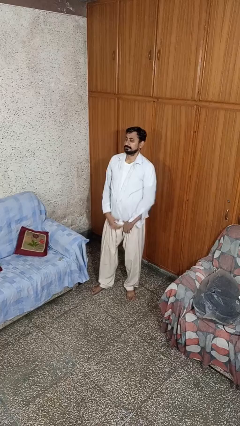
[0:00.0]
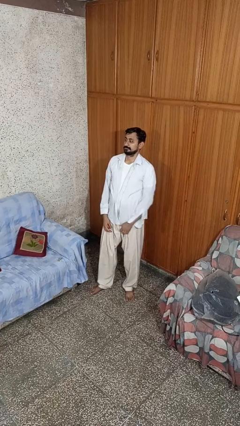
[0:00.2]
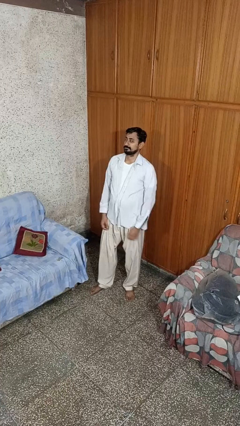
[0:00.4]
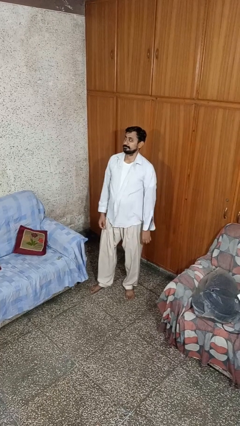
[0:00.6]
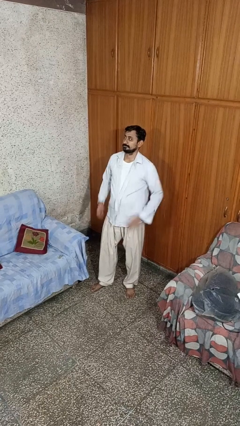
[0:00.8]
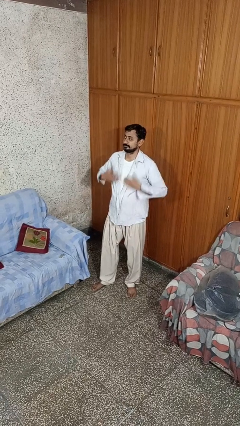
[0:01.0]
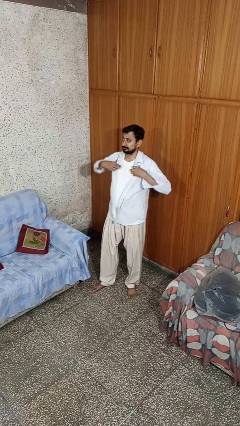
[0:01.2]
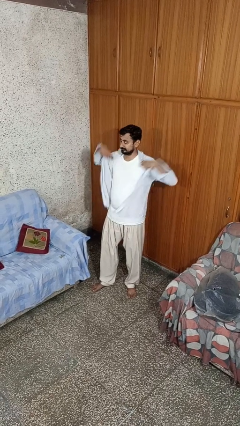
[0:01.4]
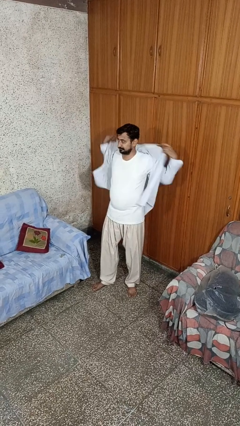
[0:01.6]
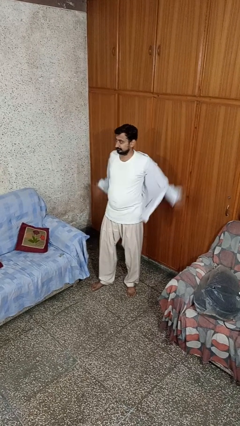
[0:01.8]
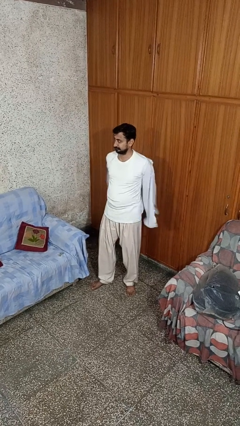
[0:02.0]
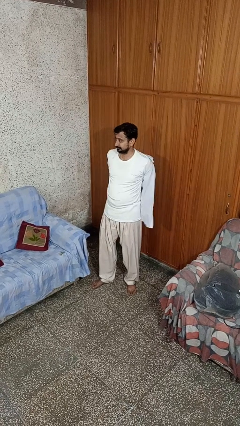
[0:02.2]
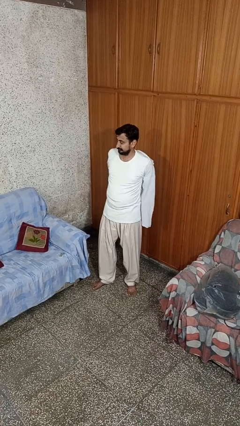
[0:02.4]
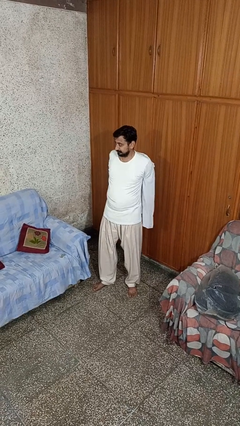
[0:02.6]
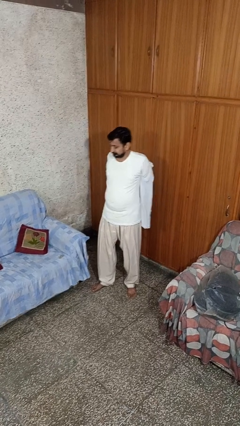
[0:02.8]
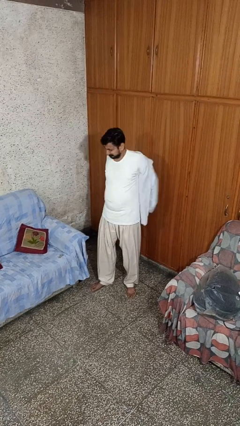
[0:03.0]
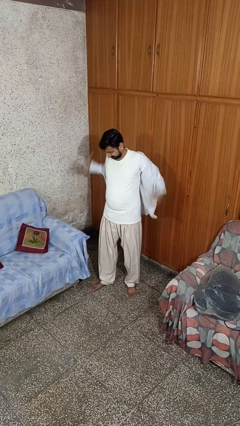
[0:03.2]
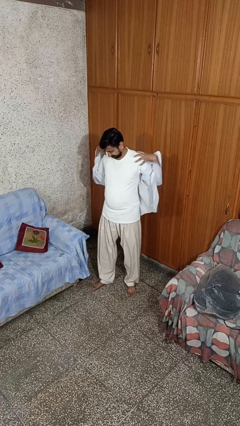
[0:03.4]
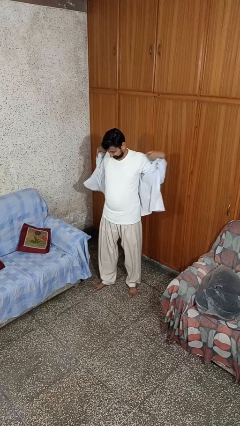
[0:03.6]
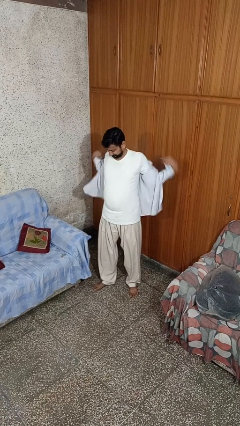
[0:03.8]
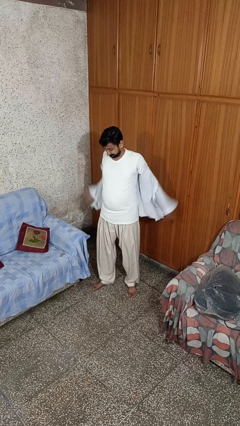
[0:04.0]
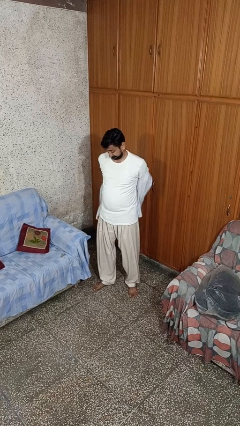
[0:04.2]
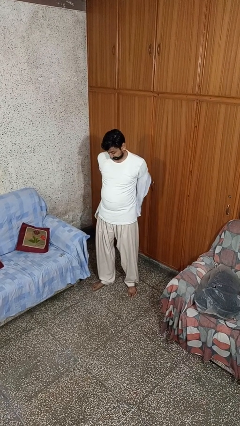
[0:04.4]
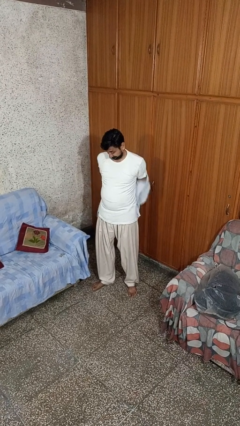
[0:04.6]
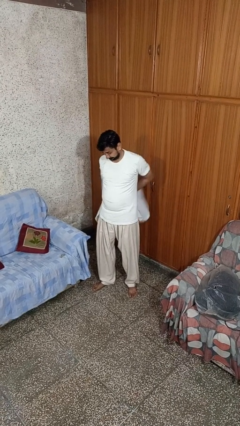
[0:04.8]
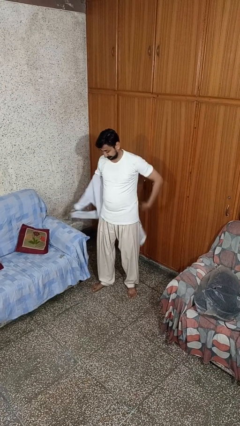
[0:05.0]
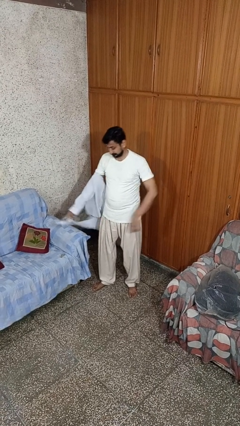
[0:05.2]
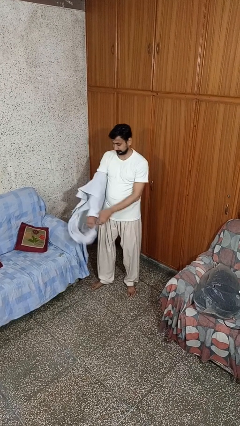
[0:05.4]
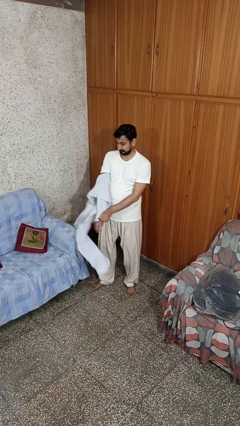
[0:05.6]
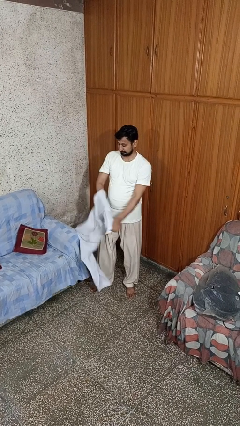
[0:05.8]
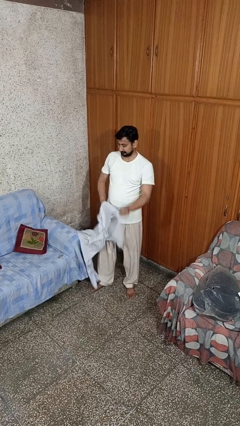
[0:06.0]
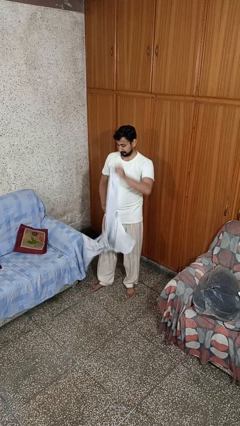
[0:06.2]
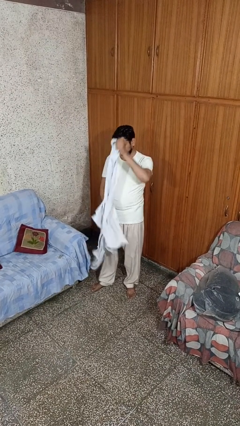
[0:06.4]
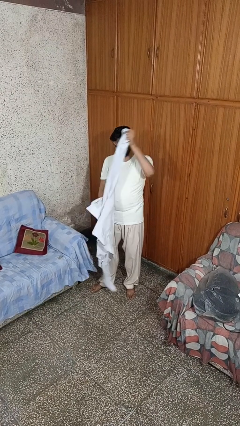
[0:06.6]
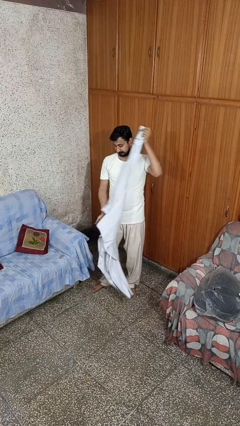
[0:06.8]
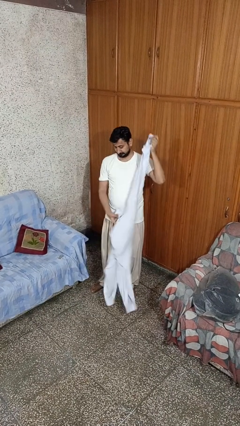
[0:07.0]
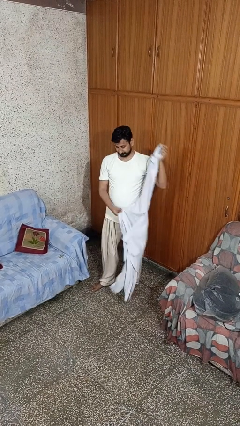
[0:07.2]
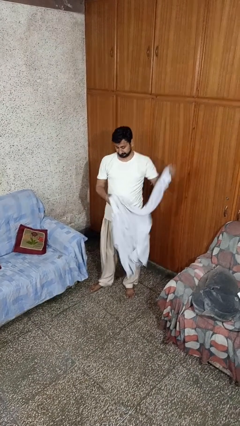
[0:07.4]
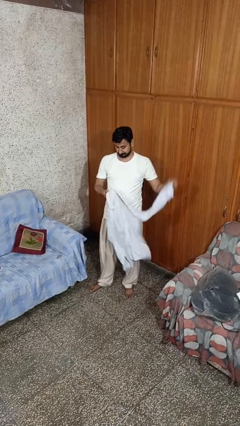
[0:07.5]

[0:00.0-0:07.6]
person takes off shirt

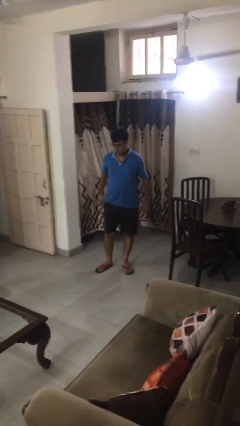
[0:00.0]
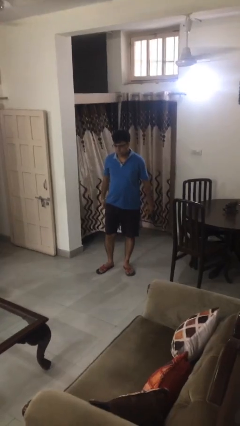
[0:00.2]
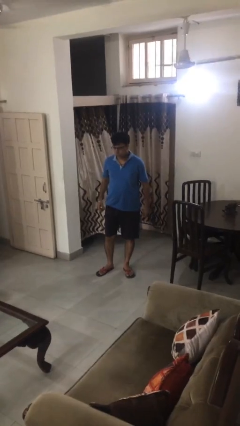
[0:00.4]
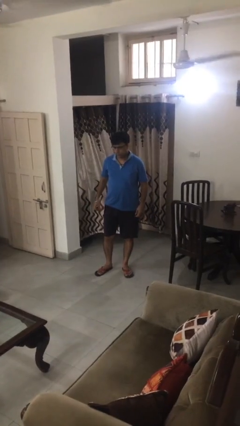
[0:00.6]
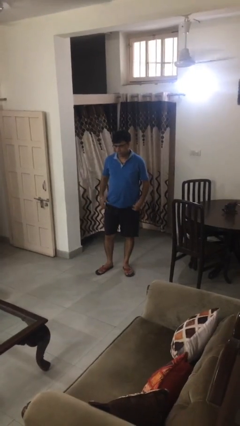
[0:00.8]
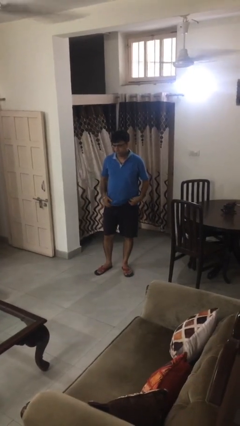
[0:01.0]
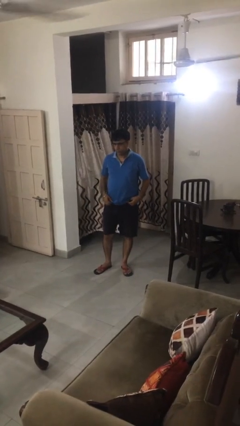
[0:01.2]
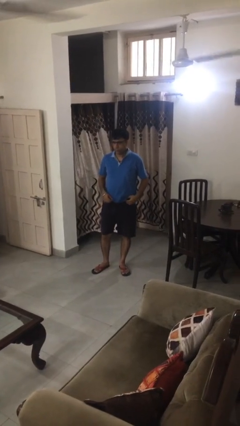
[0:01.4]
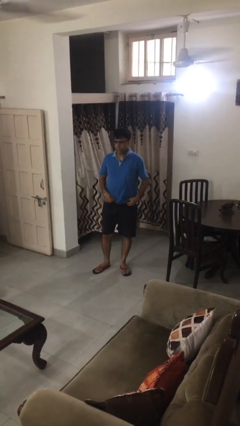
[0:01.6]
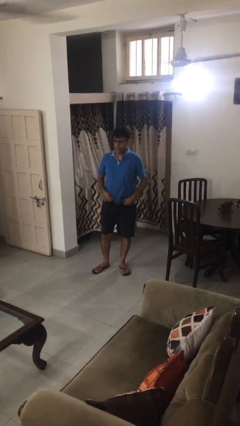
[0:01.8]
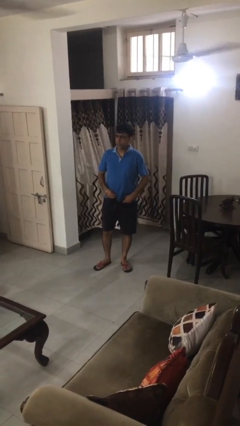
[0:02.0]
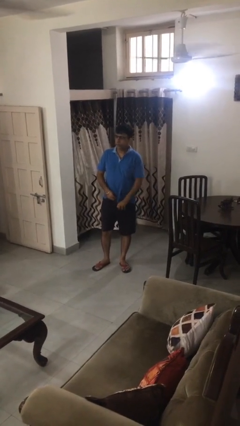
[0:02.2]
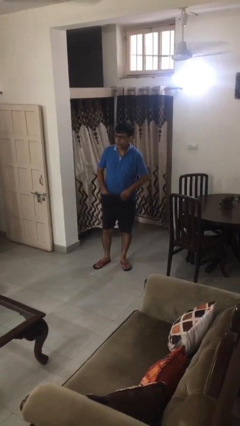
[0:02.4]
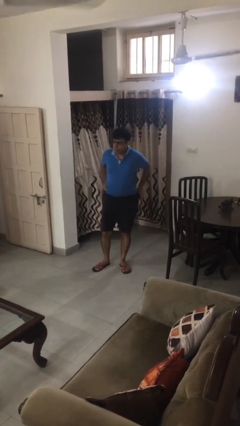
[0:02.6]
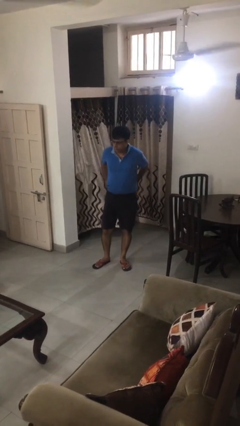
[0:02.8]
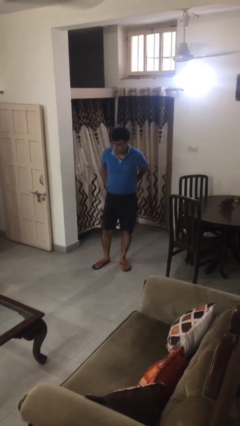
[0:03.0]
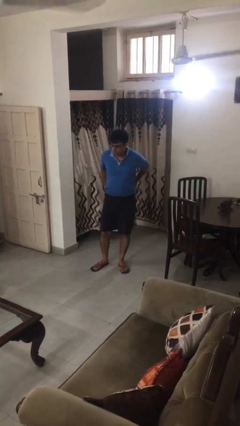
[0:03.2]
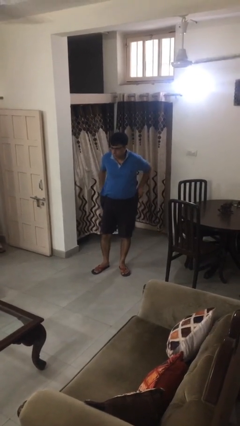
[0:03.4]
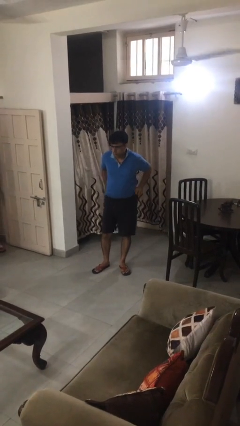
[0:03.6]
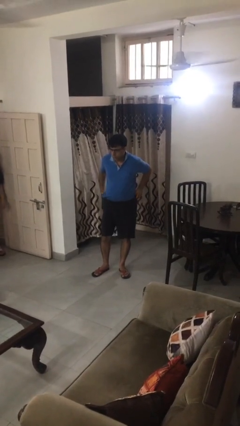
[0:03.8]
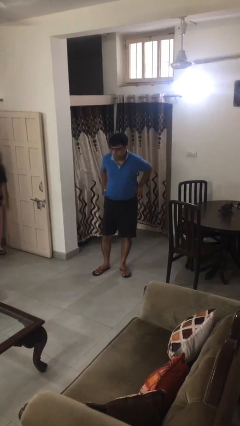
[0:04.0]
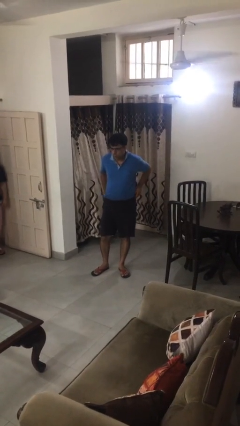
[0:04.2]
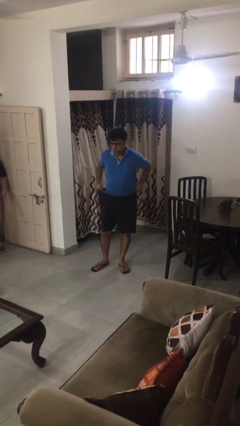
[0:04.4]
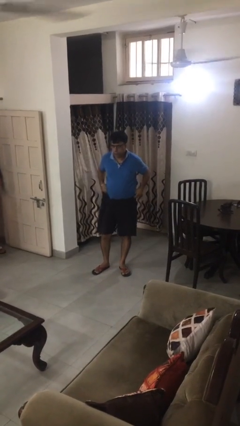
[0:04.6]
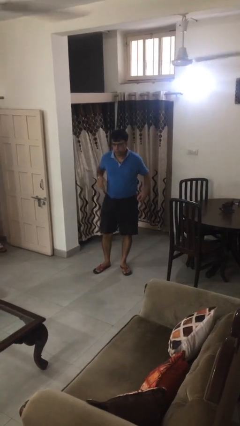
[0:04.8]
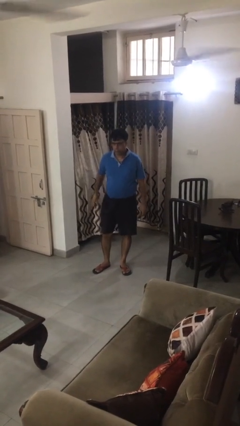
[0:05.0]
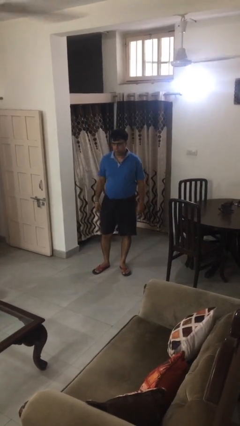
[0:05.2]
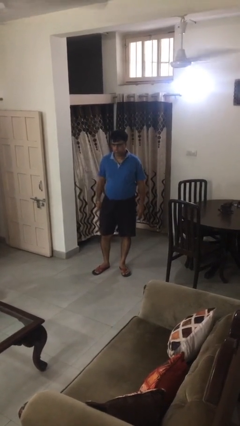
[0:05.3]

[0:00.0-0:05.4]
person tucks in shirt

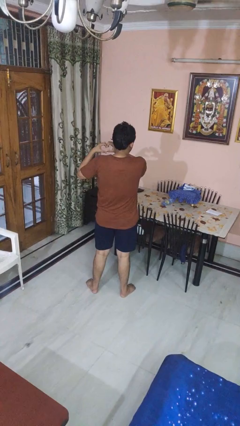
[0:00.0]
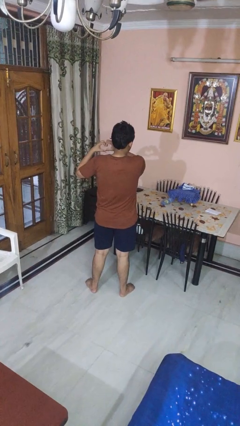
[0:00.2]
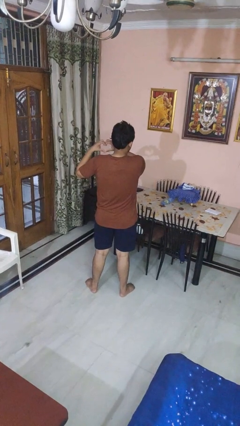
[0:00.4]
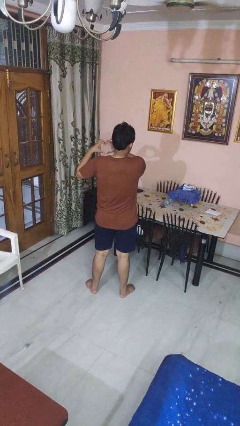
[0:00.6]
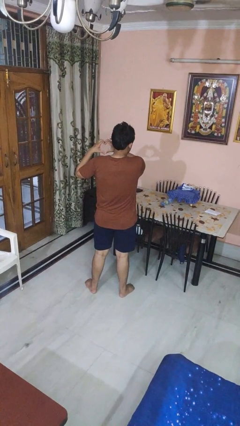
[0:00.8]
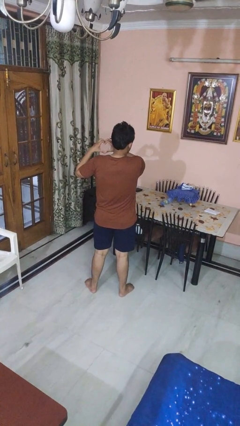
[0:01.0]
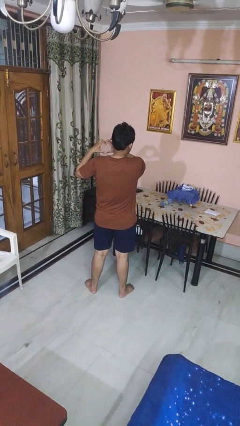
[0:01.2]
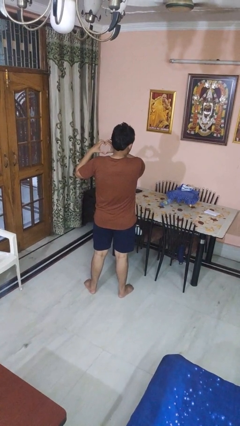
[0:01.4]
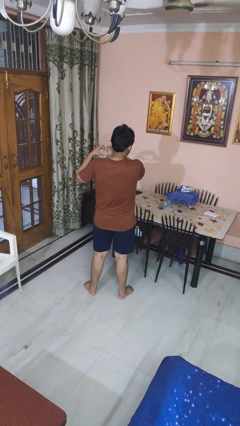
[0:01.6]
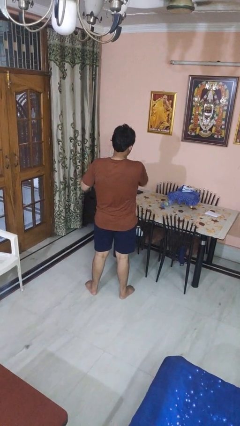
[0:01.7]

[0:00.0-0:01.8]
person gestures heart

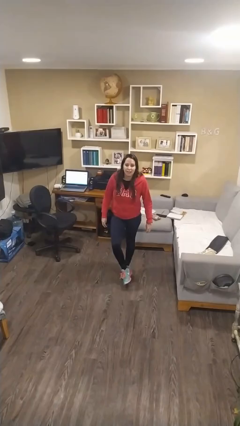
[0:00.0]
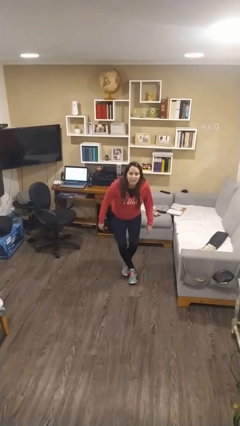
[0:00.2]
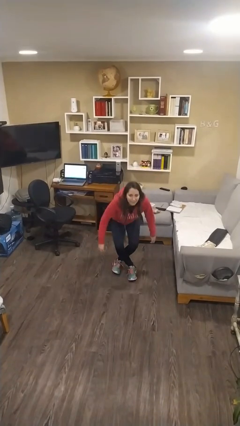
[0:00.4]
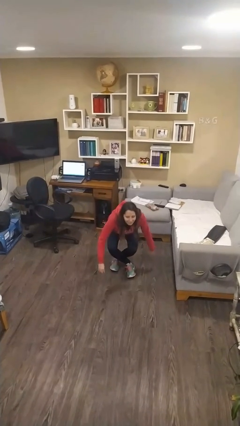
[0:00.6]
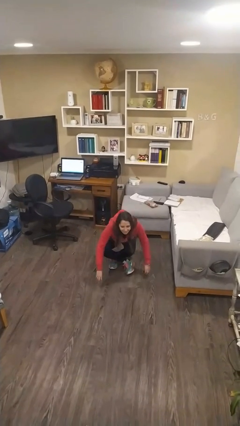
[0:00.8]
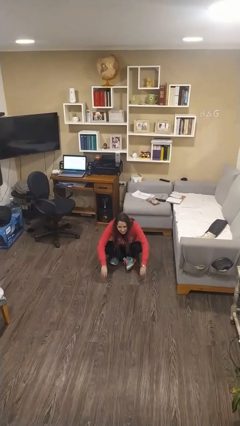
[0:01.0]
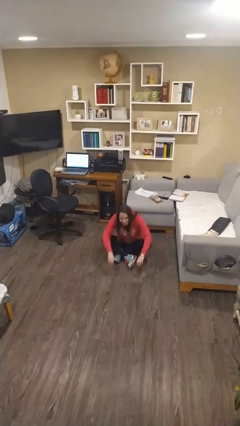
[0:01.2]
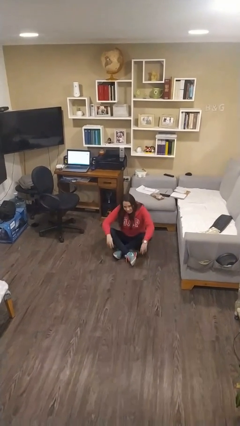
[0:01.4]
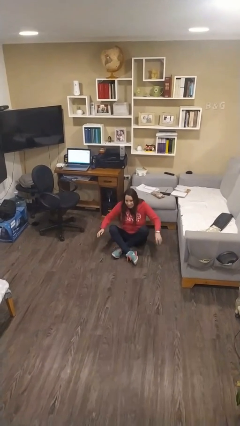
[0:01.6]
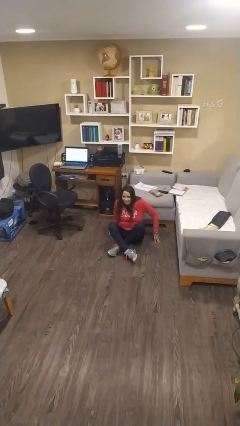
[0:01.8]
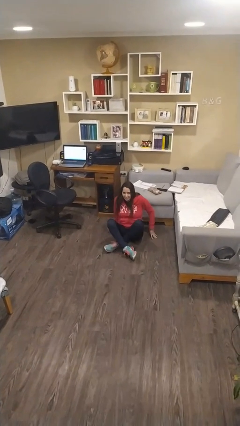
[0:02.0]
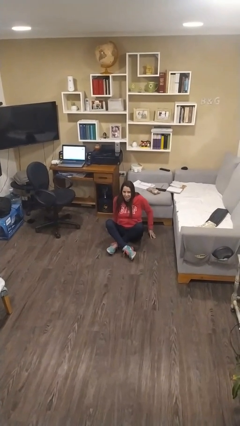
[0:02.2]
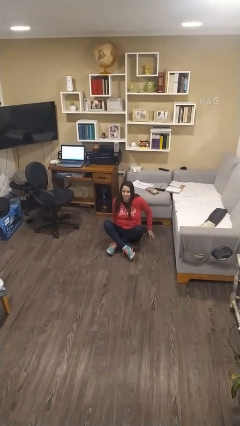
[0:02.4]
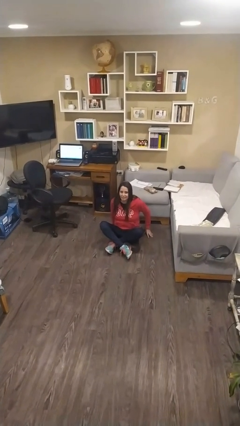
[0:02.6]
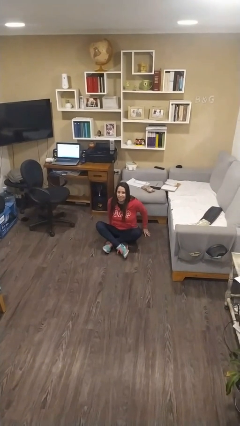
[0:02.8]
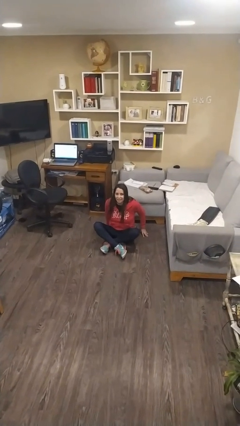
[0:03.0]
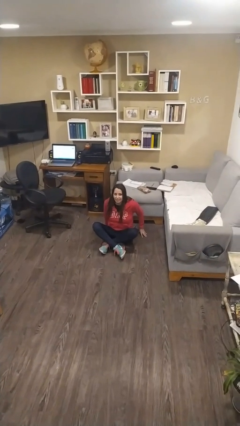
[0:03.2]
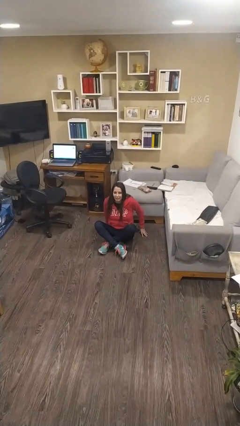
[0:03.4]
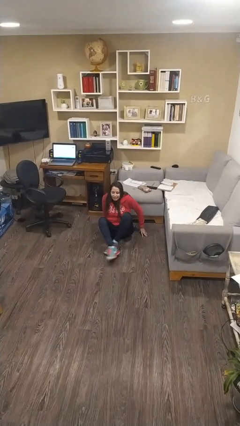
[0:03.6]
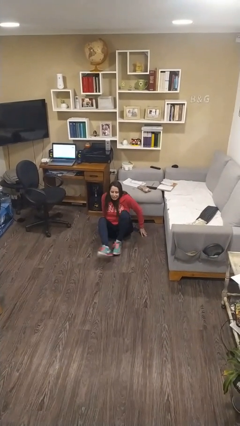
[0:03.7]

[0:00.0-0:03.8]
person sits crisscross
